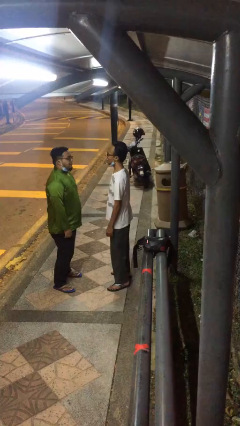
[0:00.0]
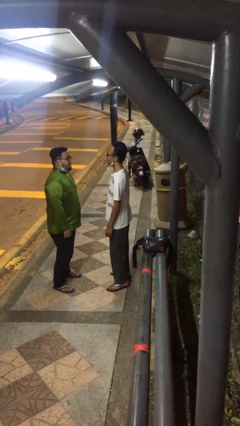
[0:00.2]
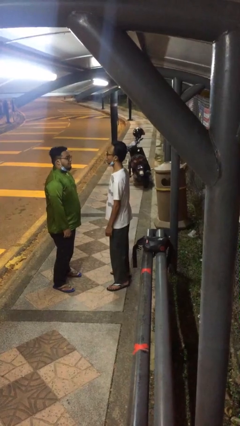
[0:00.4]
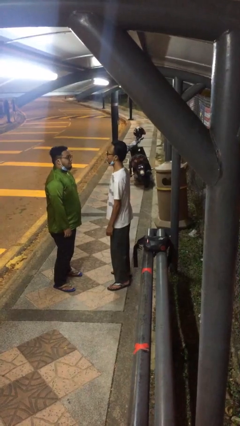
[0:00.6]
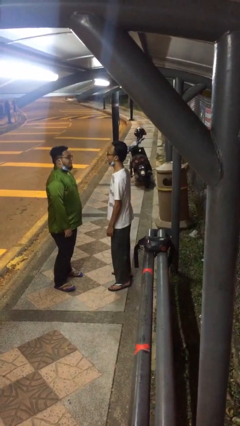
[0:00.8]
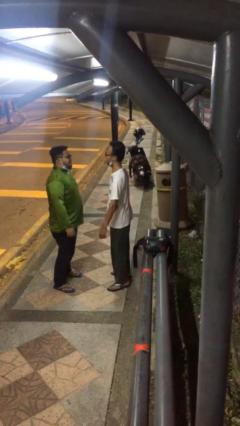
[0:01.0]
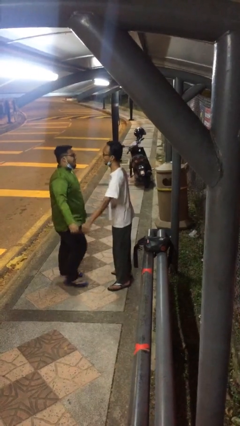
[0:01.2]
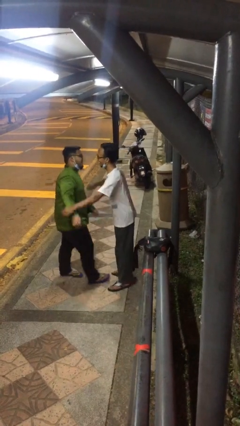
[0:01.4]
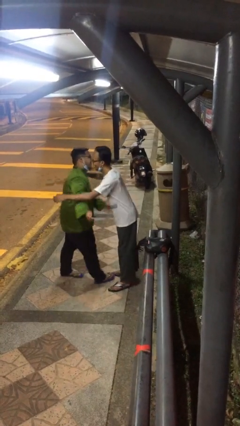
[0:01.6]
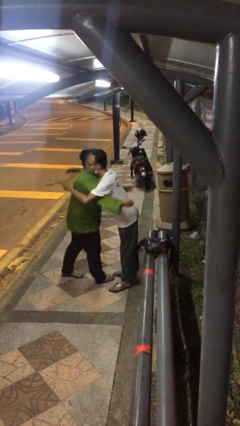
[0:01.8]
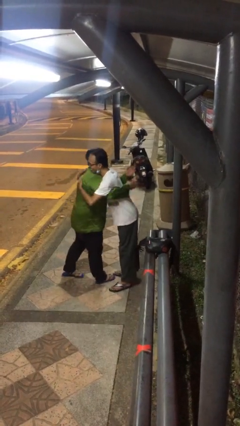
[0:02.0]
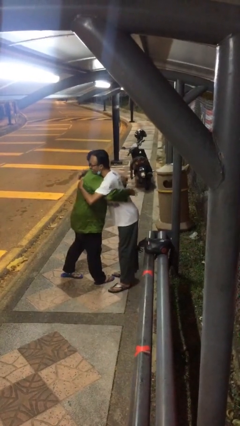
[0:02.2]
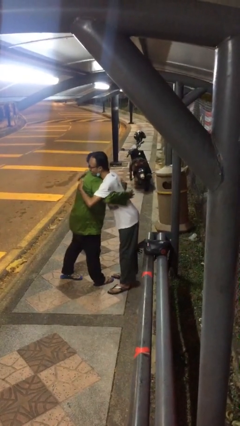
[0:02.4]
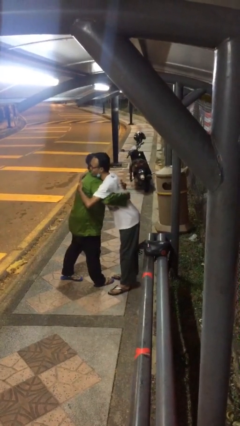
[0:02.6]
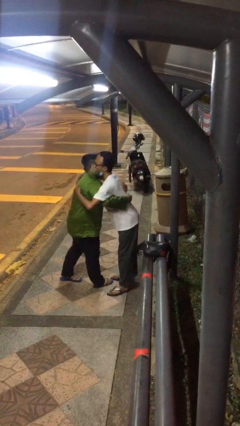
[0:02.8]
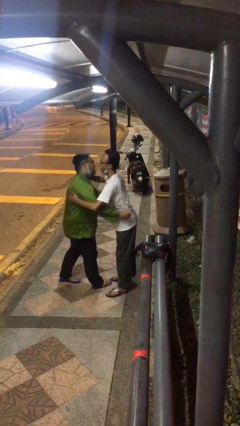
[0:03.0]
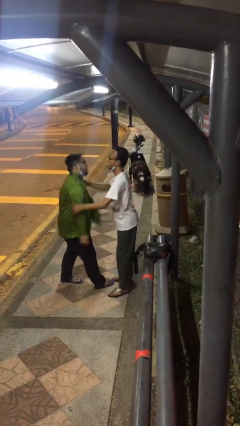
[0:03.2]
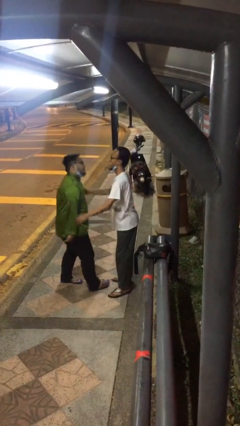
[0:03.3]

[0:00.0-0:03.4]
person embraces person

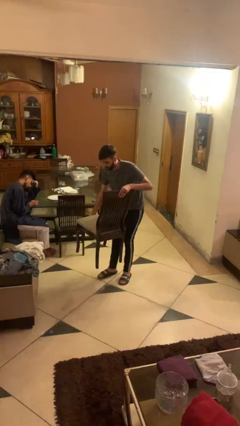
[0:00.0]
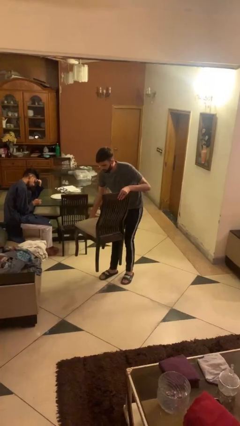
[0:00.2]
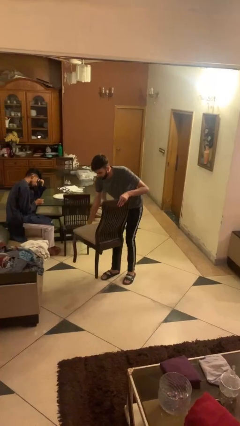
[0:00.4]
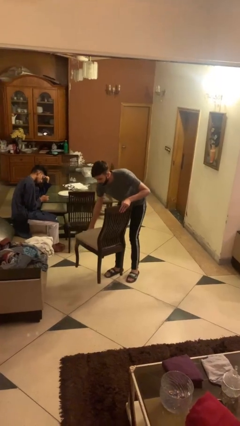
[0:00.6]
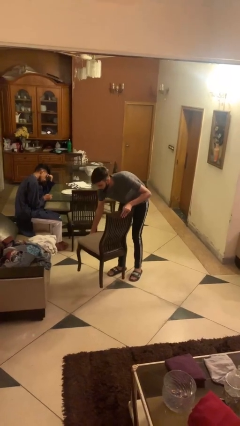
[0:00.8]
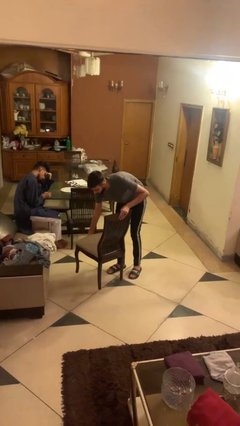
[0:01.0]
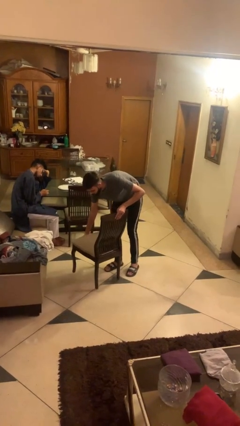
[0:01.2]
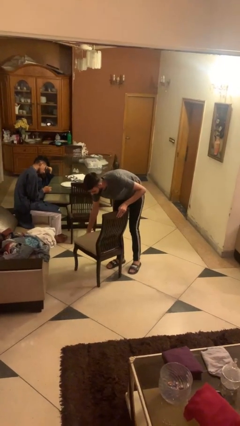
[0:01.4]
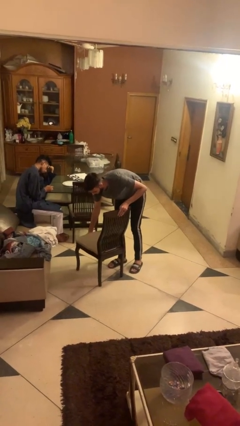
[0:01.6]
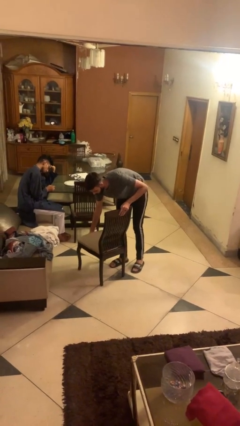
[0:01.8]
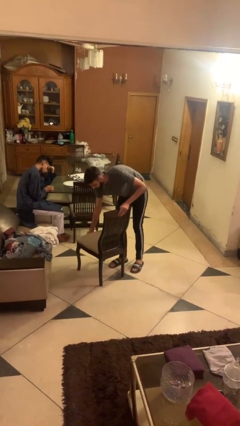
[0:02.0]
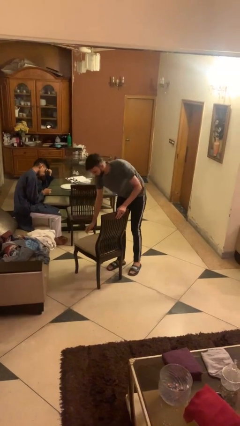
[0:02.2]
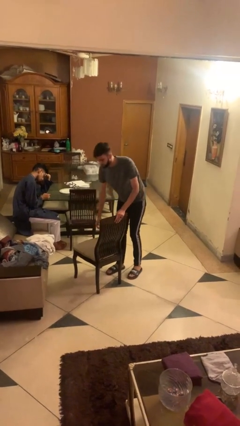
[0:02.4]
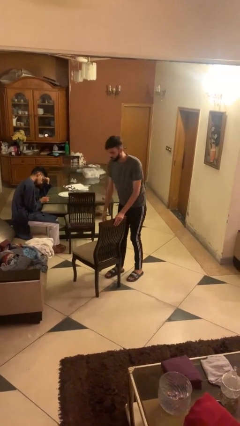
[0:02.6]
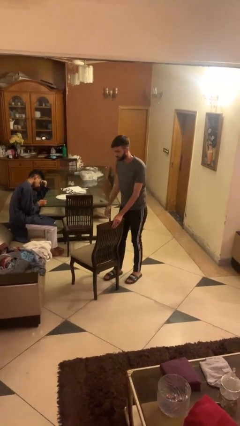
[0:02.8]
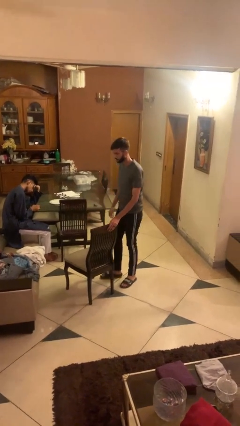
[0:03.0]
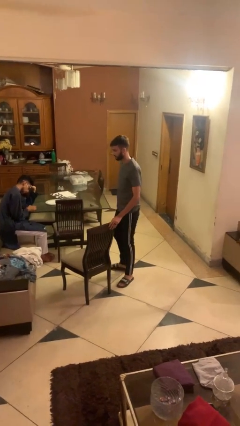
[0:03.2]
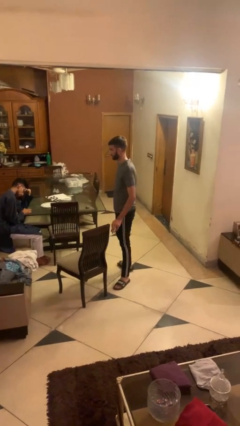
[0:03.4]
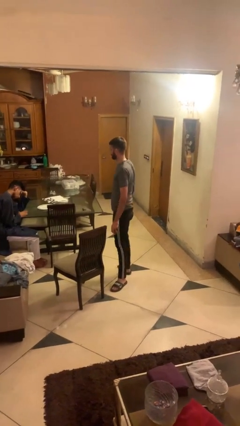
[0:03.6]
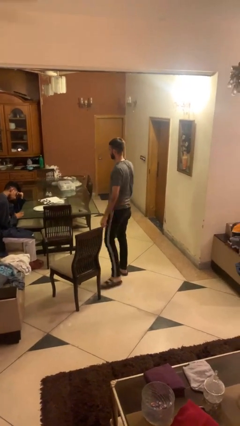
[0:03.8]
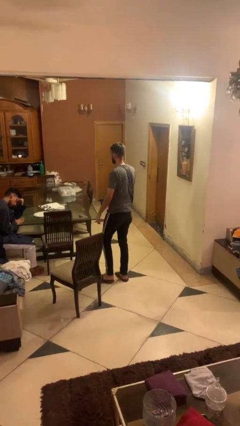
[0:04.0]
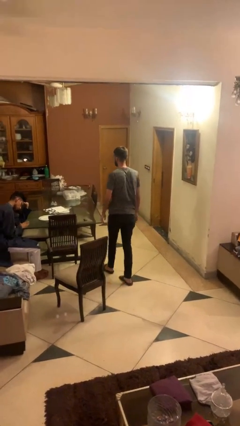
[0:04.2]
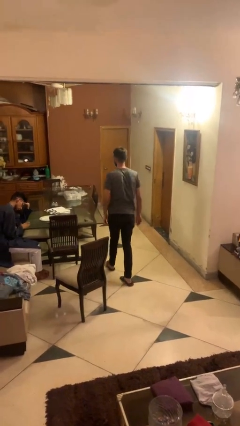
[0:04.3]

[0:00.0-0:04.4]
person puts down object on floor

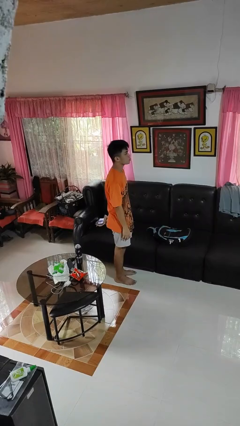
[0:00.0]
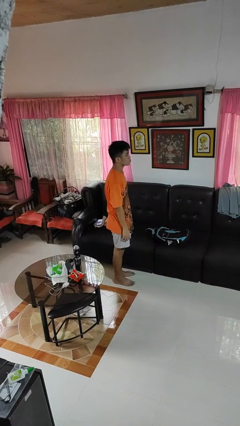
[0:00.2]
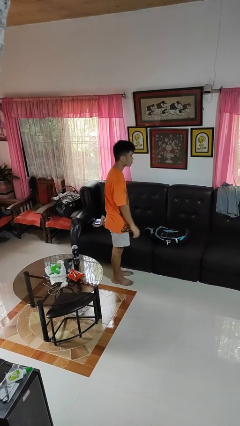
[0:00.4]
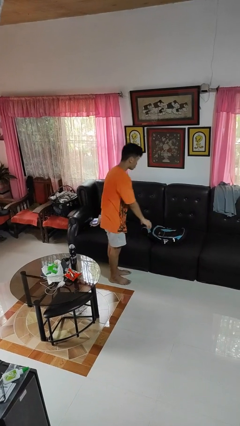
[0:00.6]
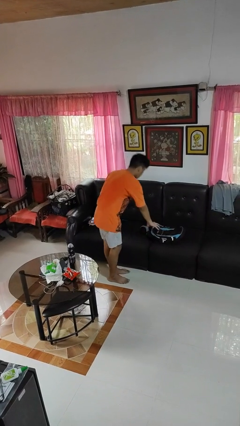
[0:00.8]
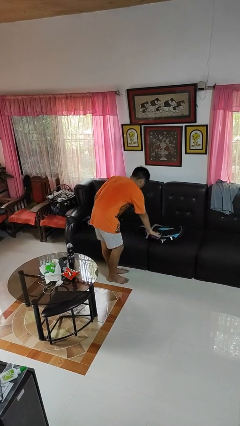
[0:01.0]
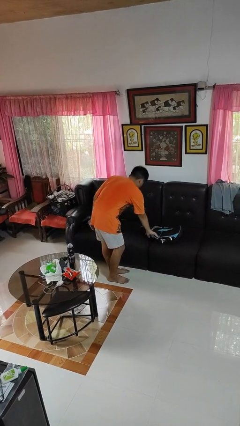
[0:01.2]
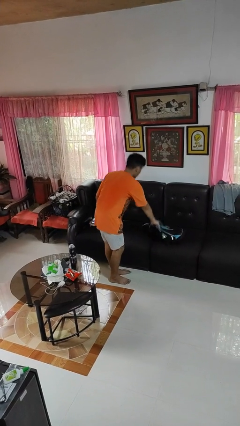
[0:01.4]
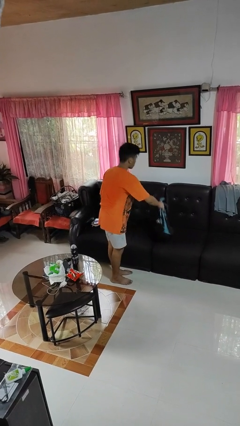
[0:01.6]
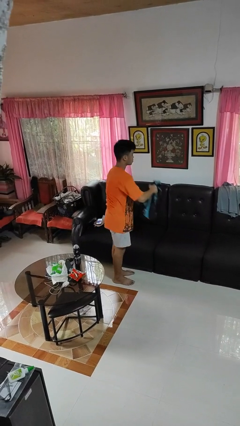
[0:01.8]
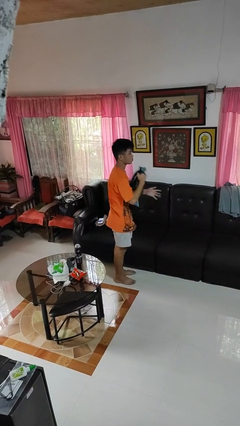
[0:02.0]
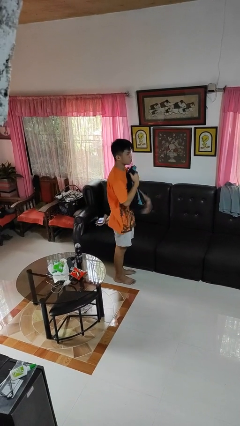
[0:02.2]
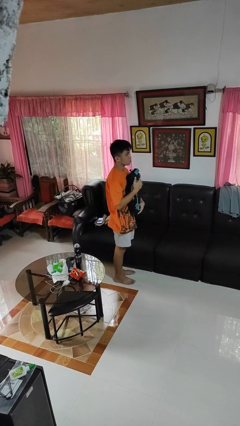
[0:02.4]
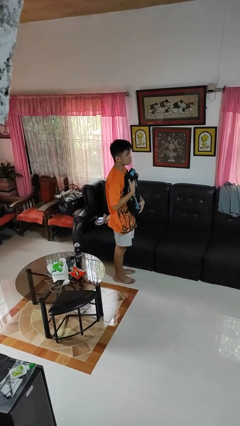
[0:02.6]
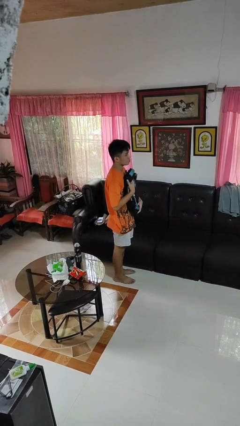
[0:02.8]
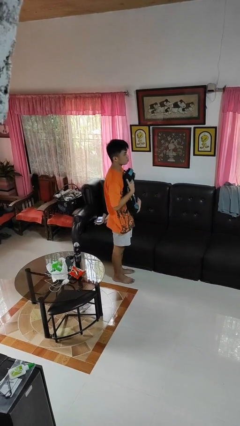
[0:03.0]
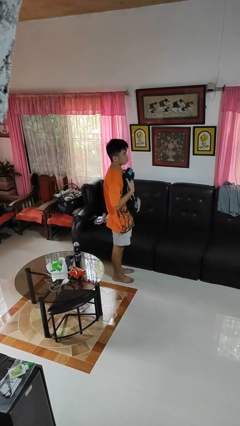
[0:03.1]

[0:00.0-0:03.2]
person picks up object from couch

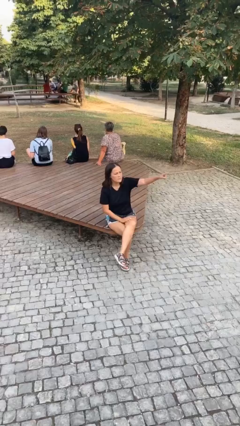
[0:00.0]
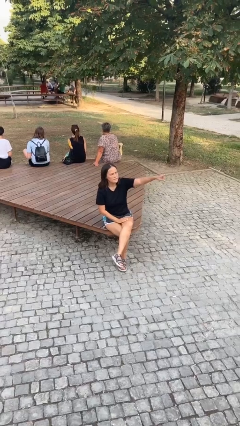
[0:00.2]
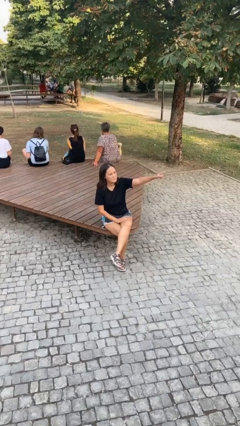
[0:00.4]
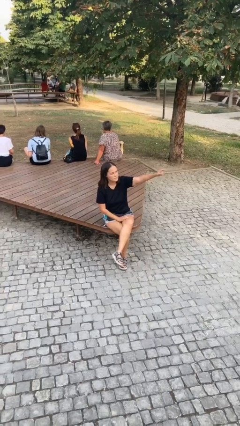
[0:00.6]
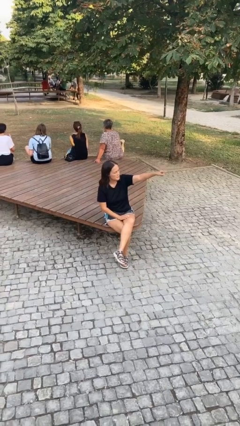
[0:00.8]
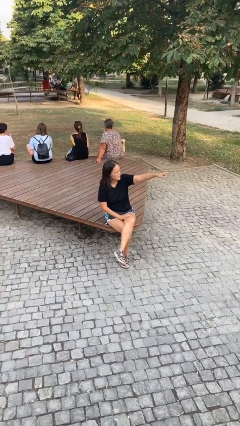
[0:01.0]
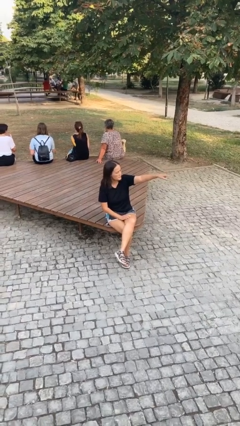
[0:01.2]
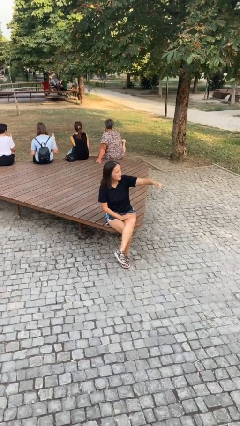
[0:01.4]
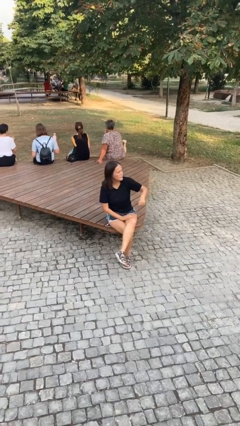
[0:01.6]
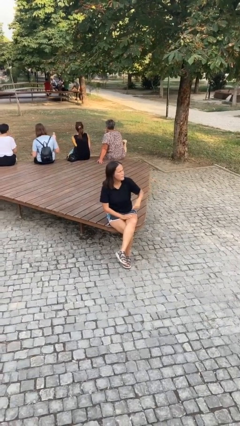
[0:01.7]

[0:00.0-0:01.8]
person points at person

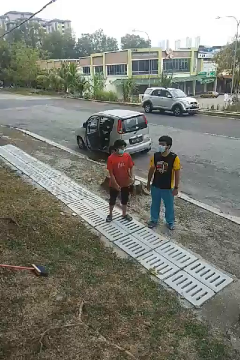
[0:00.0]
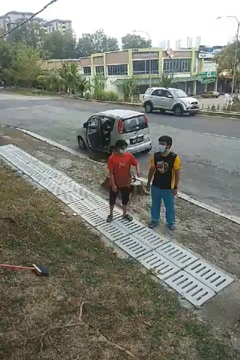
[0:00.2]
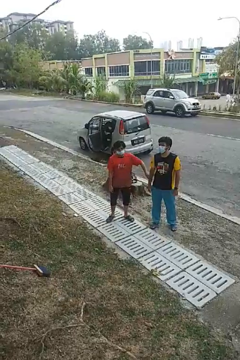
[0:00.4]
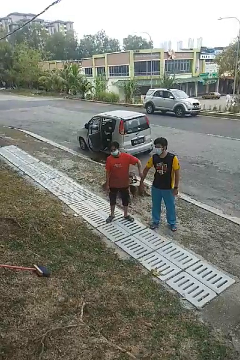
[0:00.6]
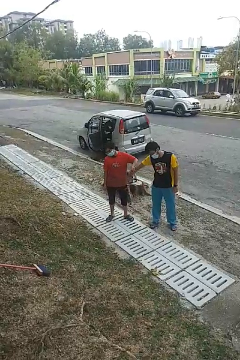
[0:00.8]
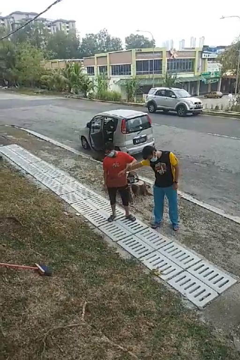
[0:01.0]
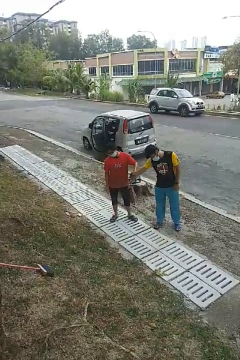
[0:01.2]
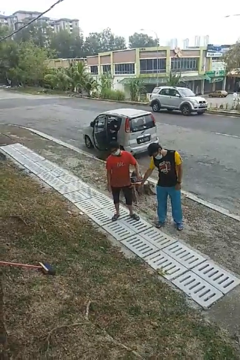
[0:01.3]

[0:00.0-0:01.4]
person grabs person by forearm

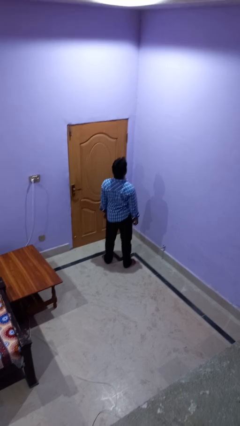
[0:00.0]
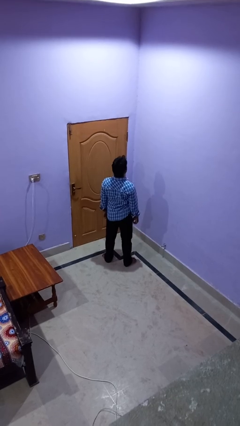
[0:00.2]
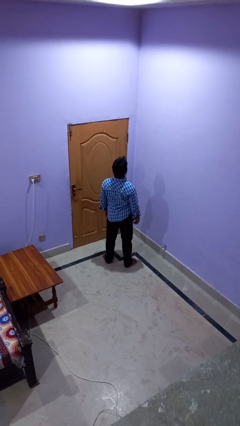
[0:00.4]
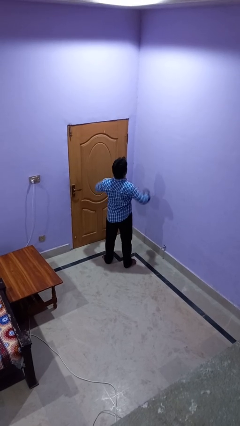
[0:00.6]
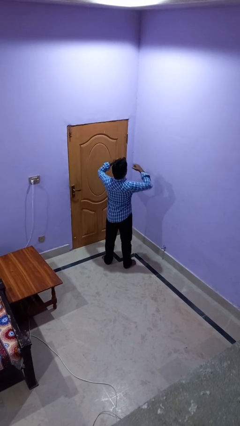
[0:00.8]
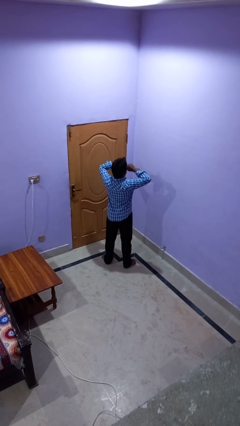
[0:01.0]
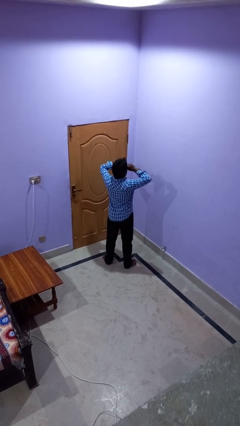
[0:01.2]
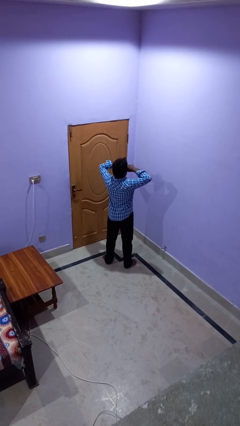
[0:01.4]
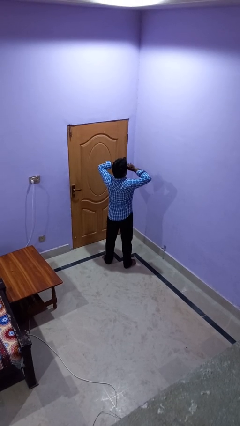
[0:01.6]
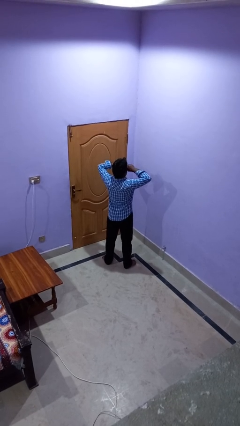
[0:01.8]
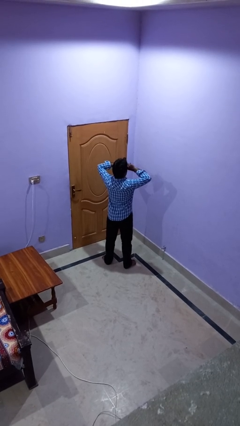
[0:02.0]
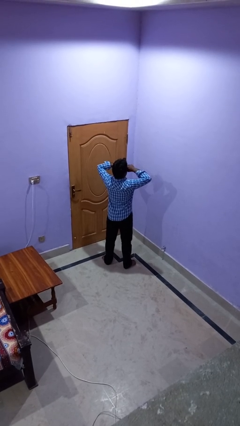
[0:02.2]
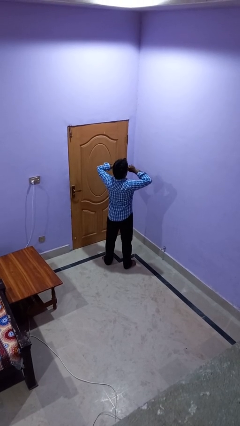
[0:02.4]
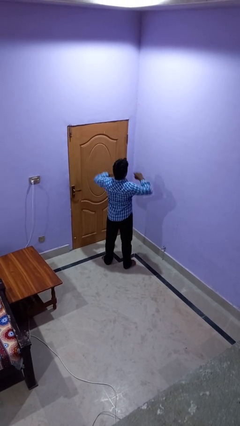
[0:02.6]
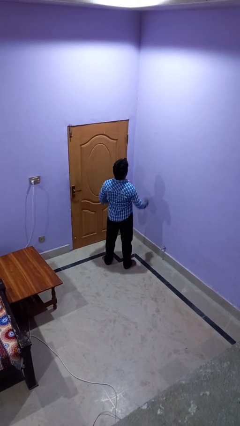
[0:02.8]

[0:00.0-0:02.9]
person rubs eyes

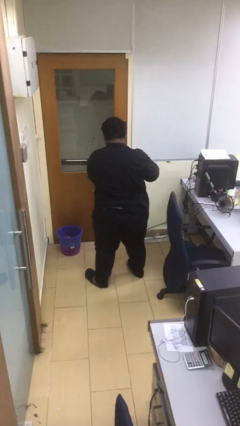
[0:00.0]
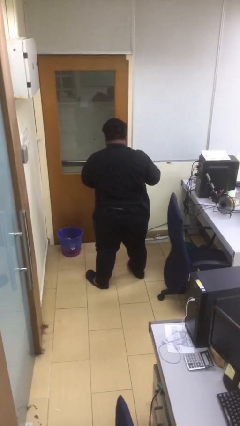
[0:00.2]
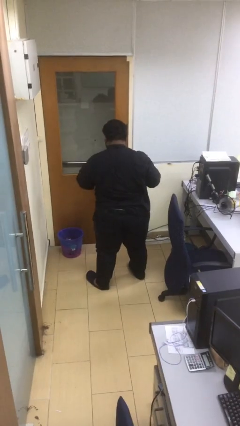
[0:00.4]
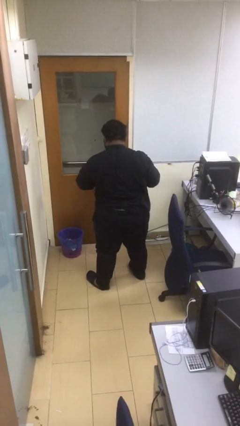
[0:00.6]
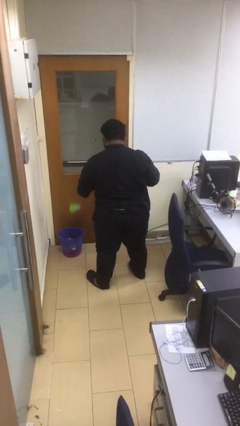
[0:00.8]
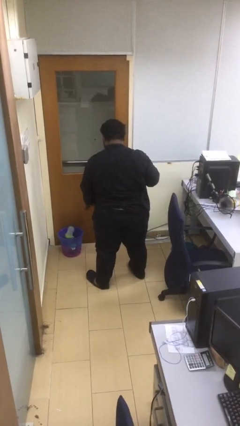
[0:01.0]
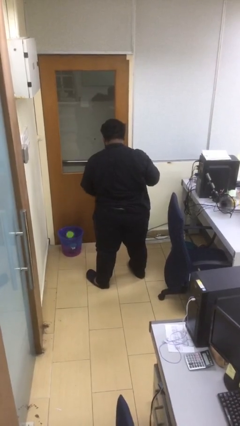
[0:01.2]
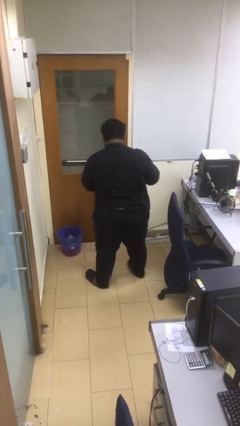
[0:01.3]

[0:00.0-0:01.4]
person discards trash
